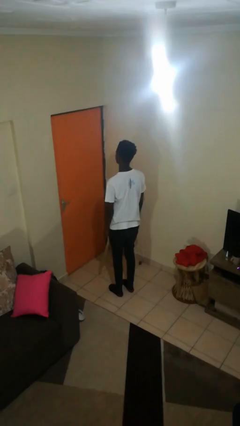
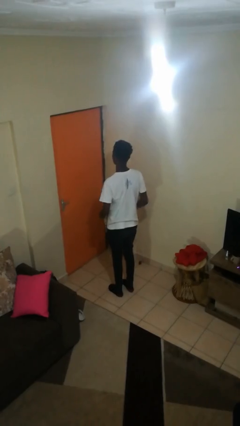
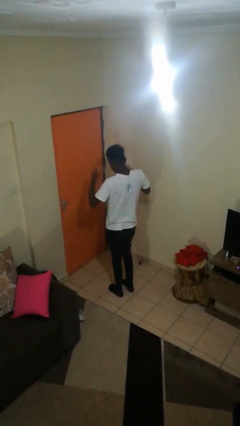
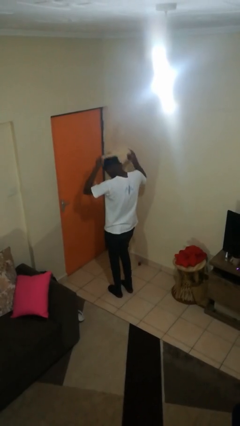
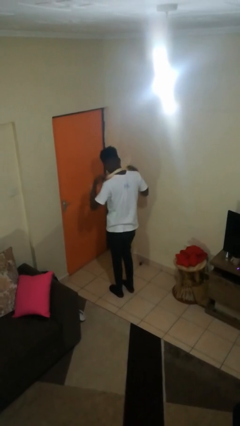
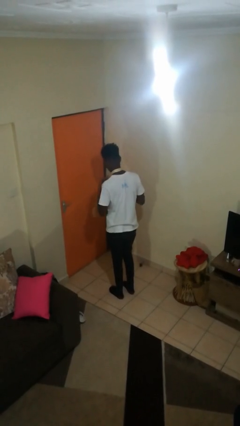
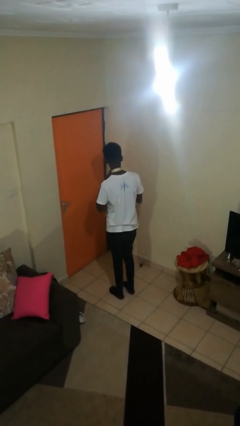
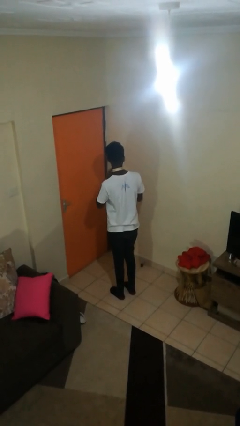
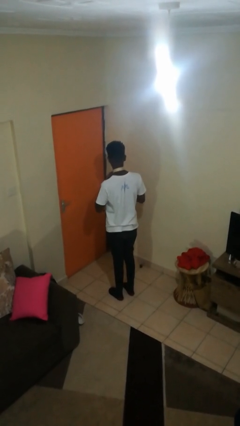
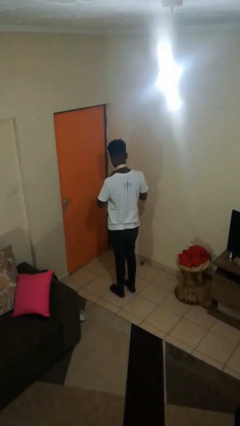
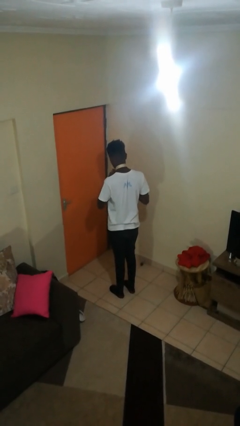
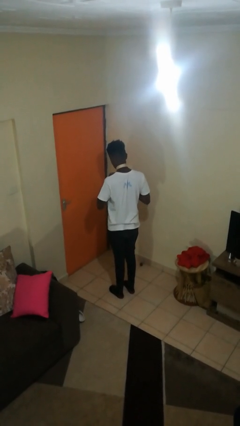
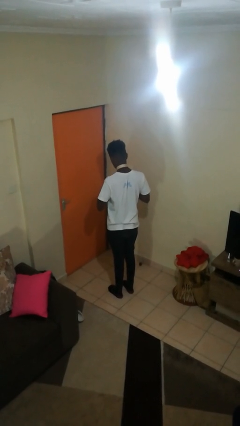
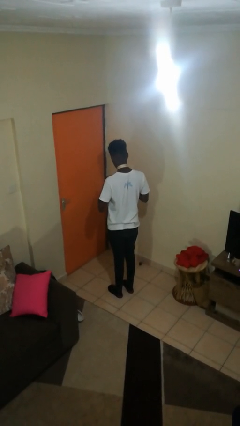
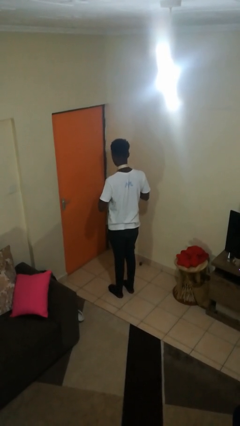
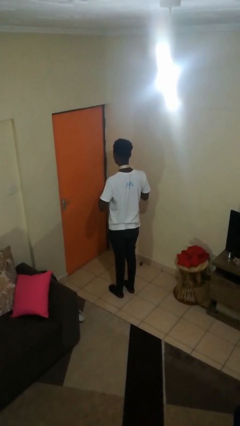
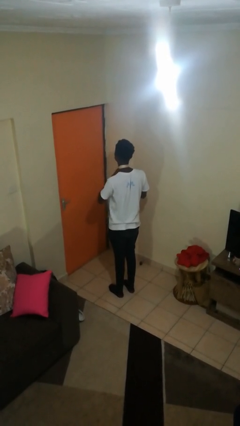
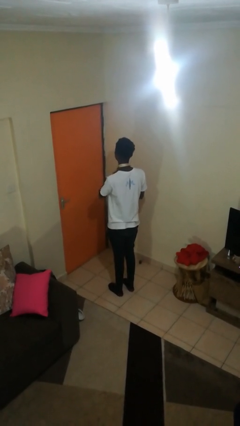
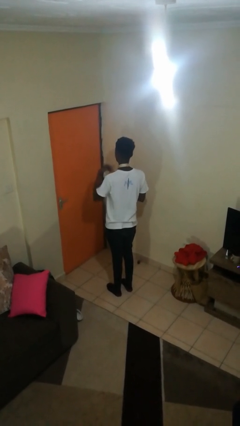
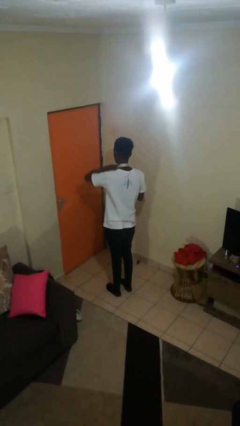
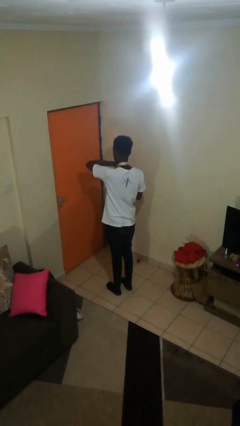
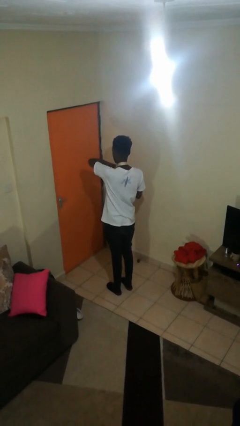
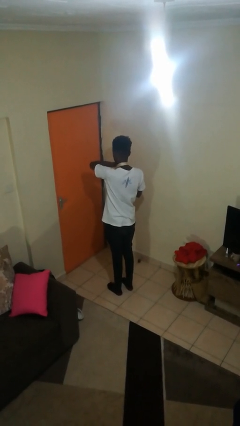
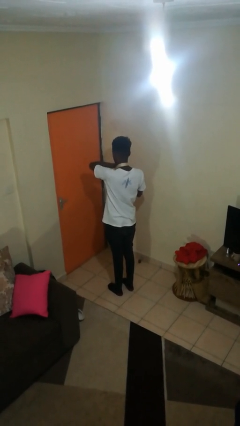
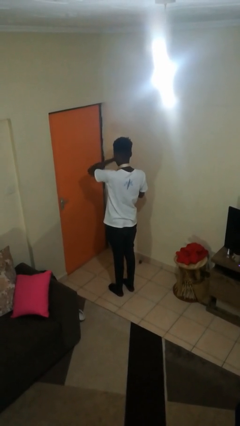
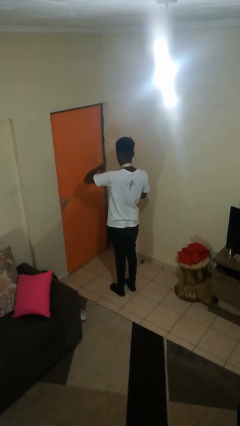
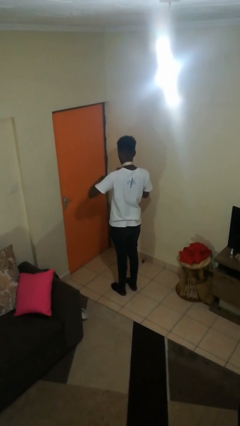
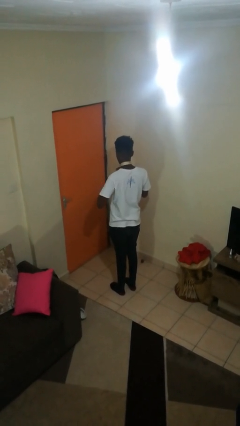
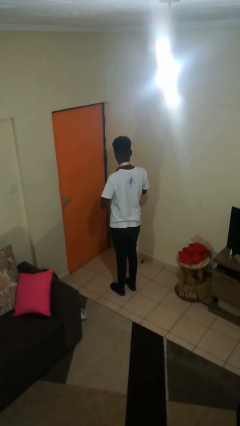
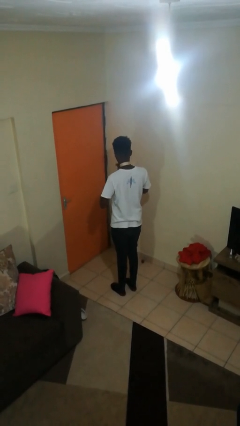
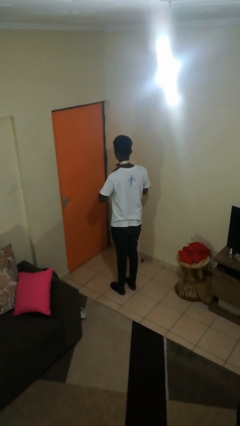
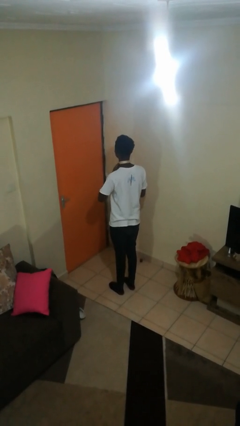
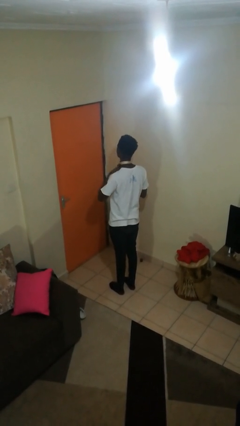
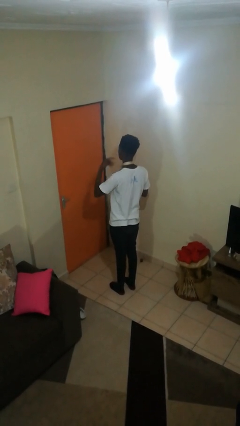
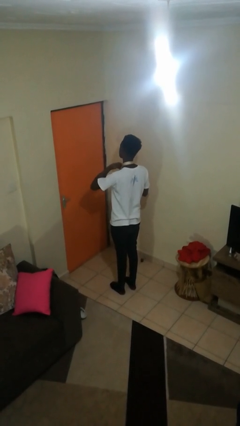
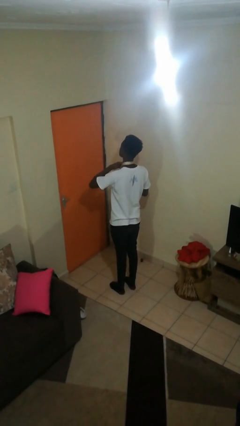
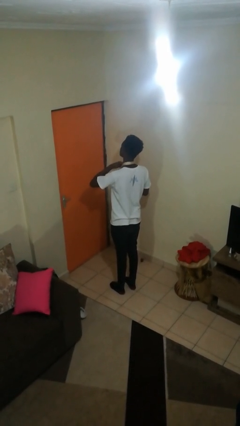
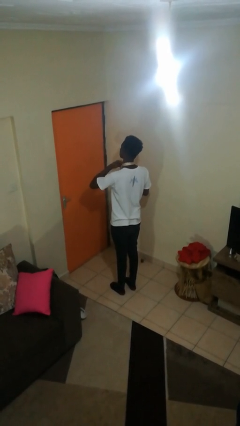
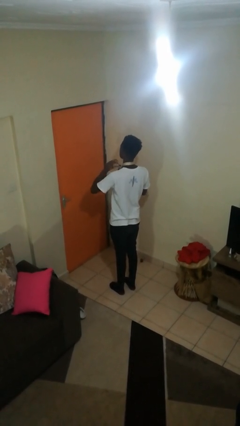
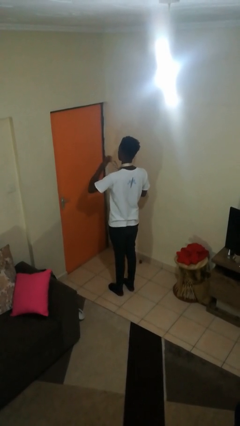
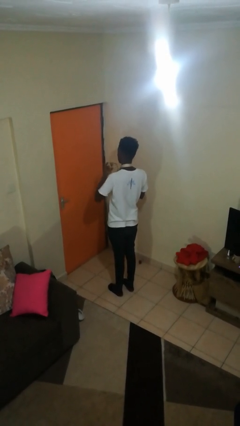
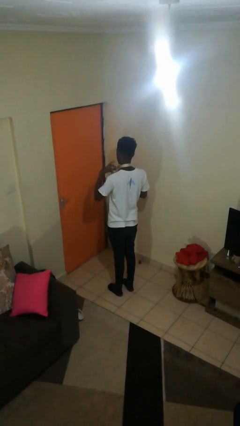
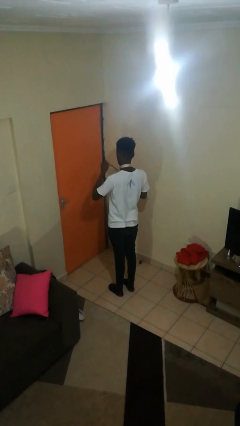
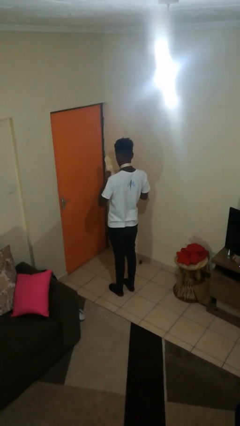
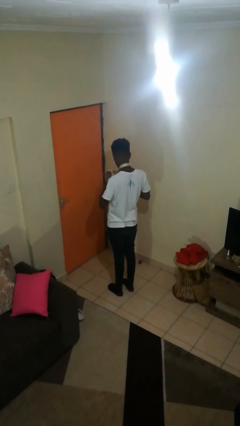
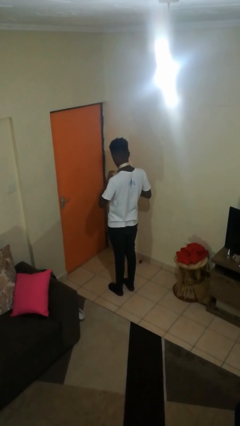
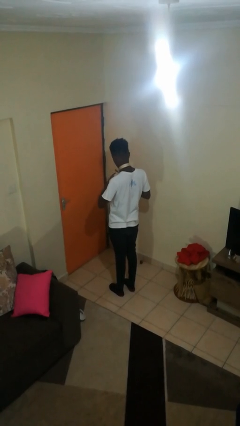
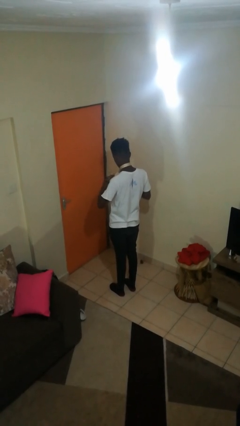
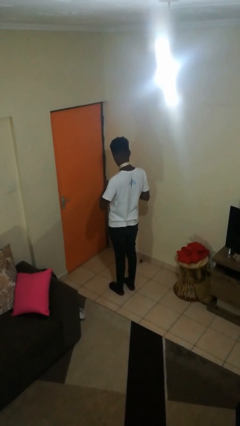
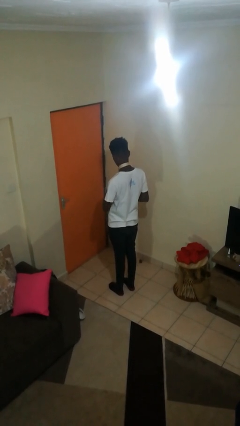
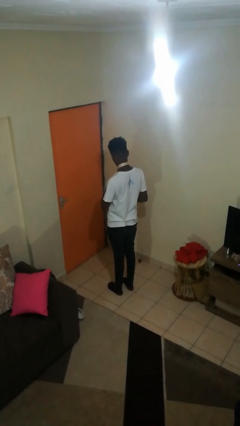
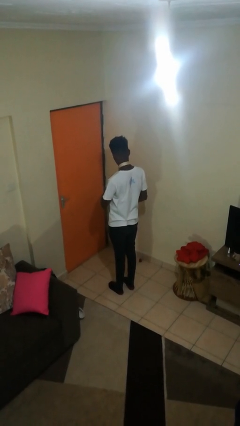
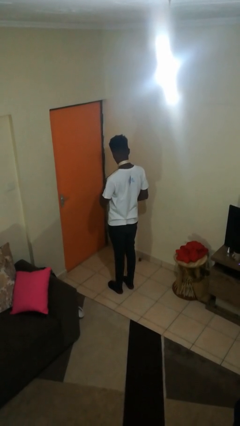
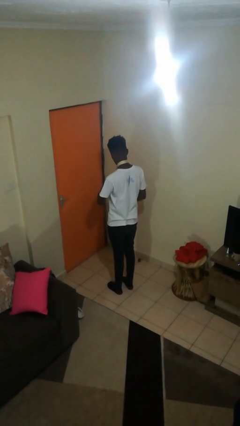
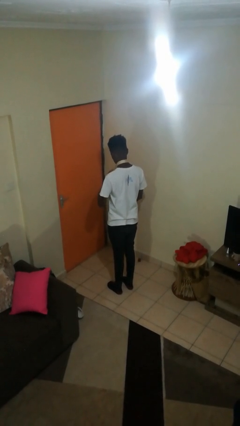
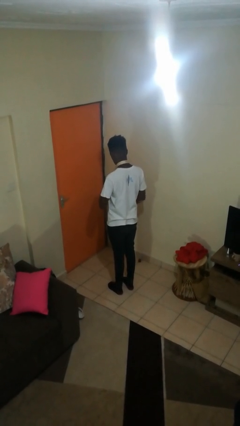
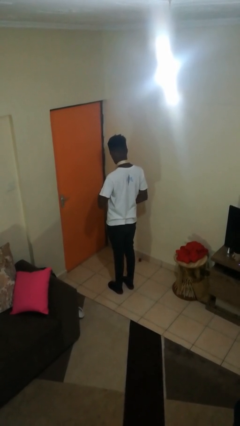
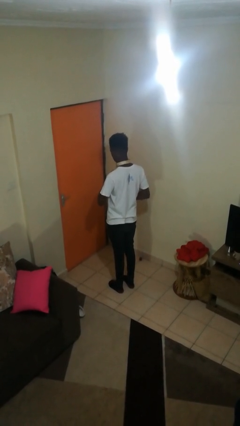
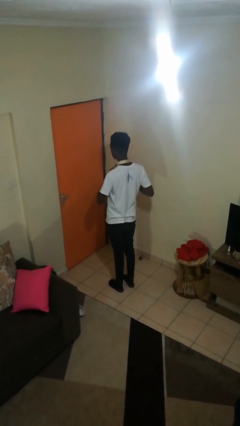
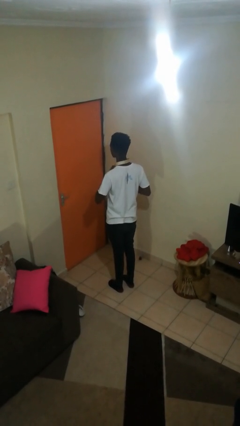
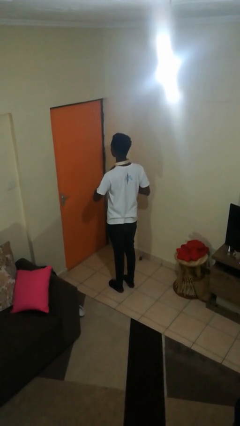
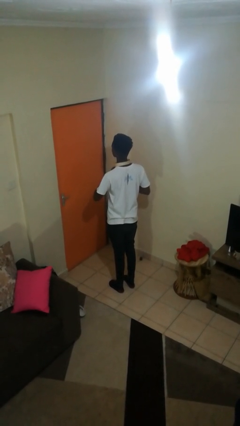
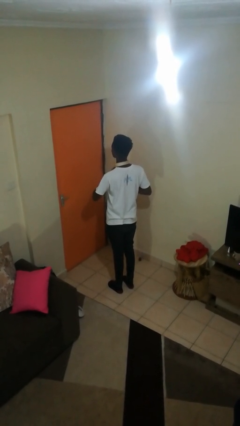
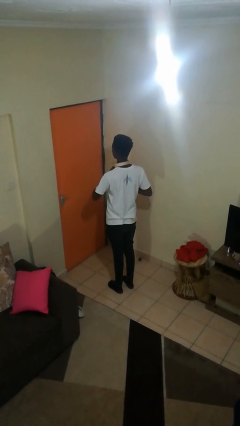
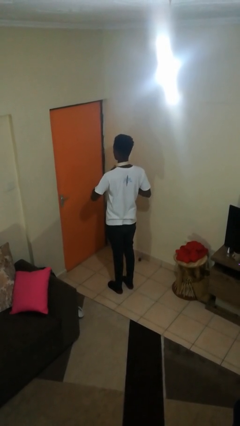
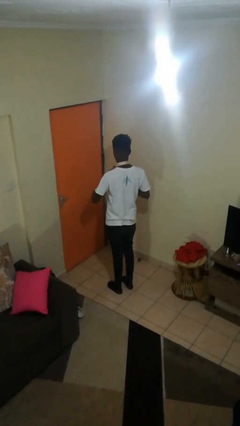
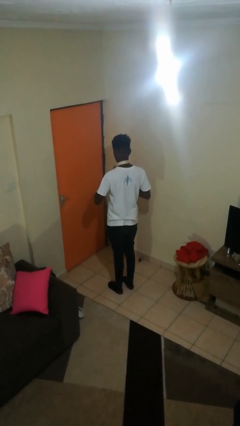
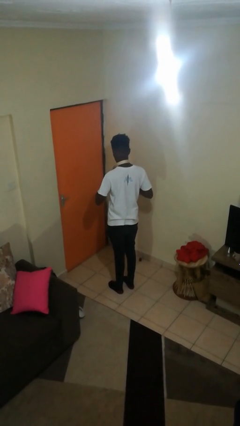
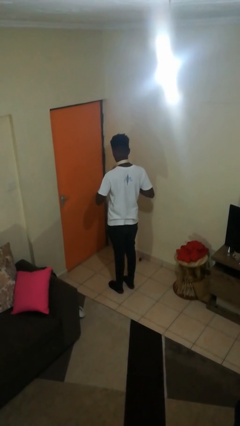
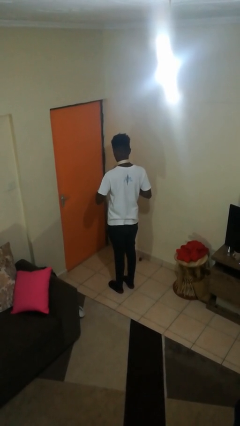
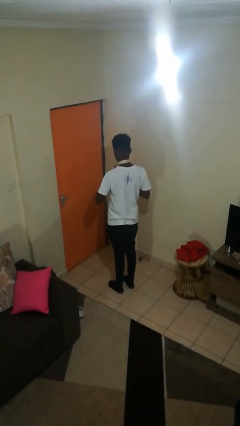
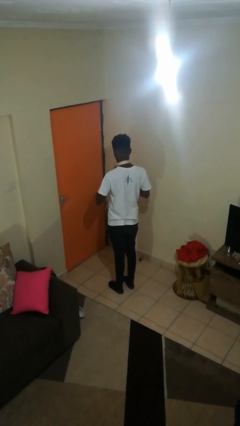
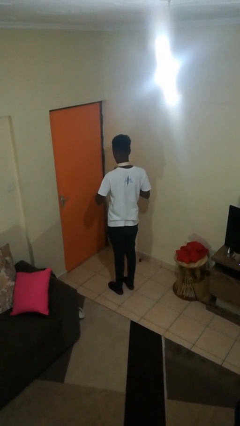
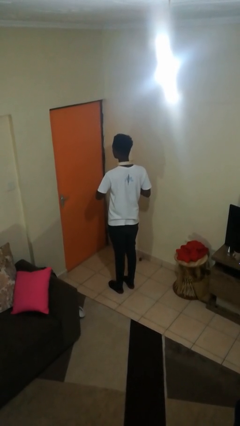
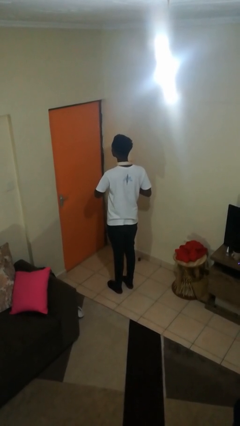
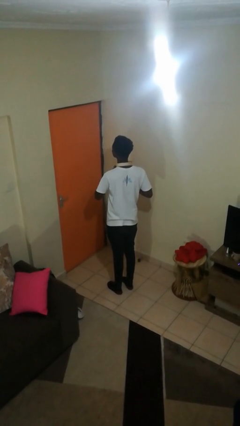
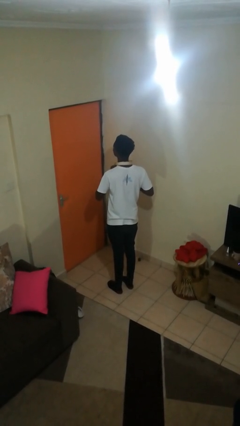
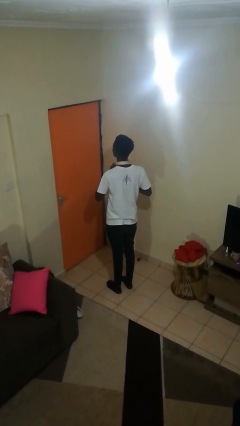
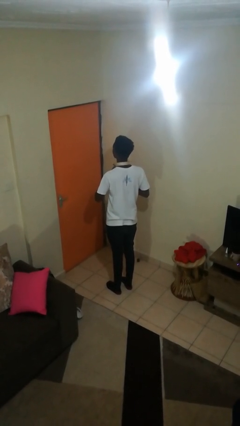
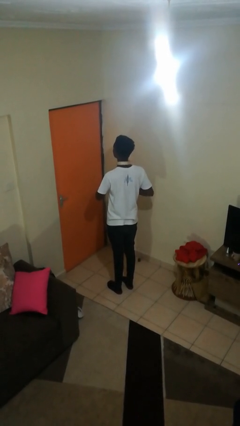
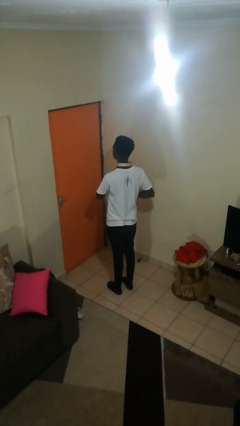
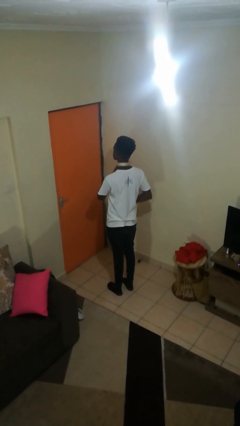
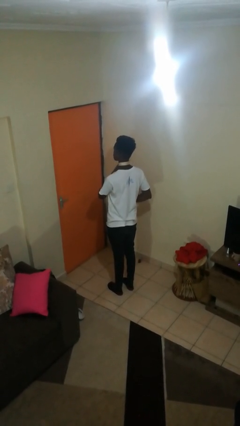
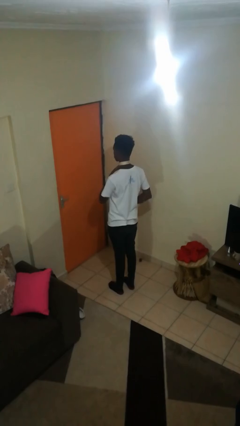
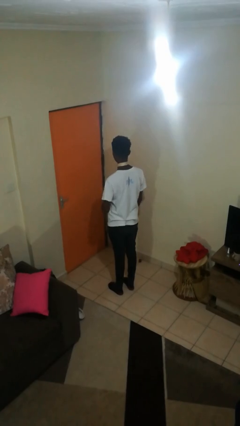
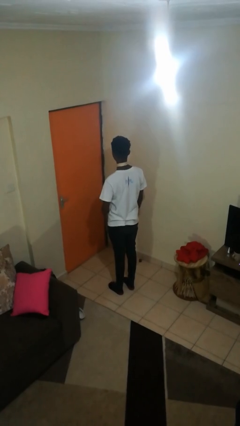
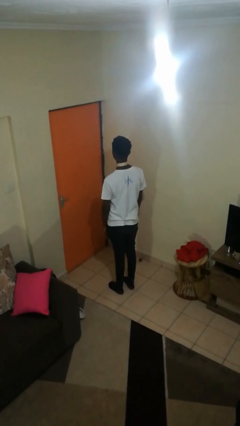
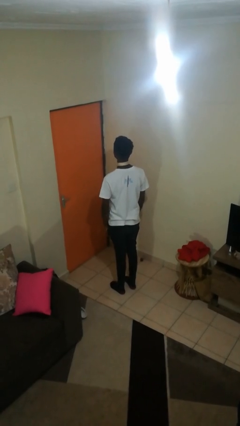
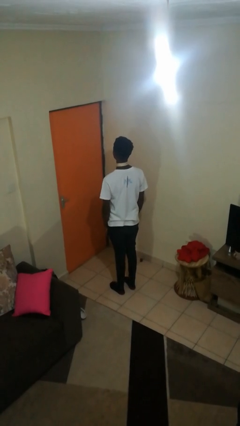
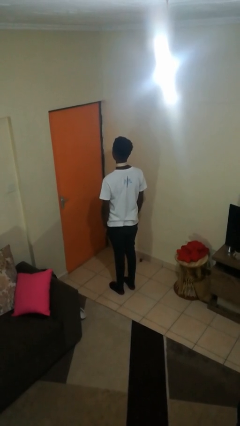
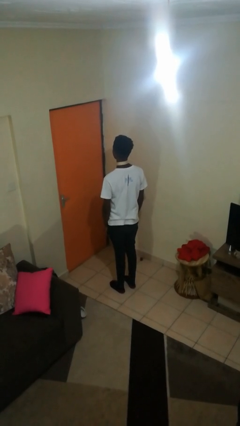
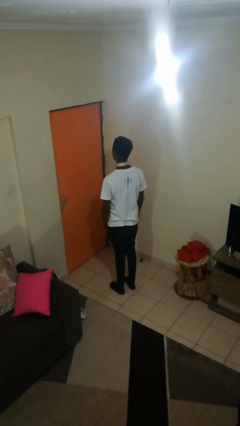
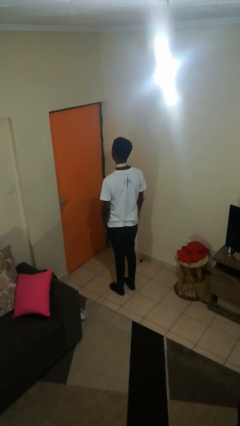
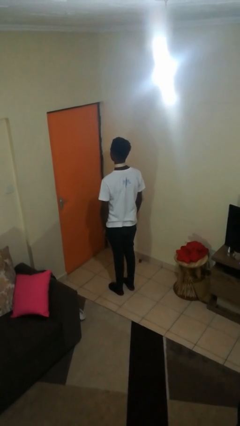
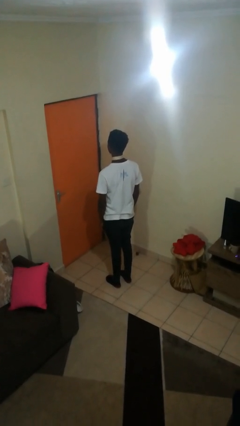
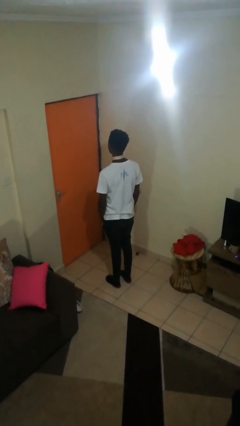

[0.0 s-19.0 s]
person puts on necktie
